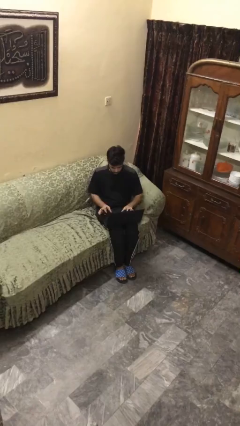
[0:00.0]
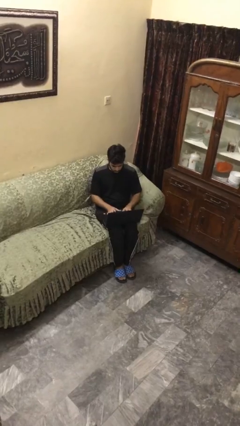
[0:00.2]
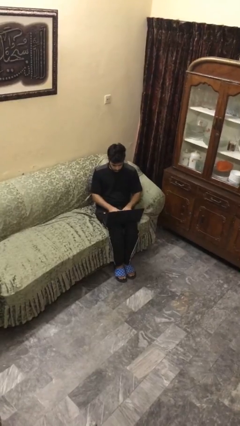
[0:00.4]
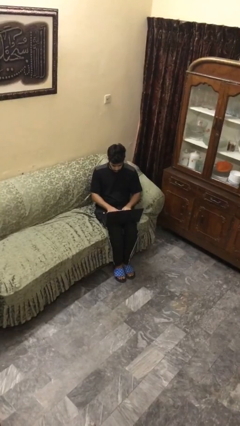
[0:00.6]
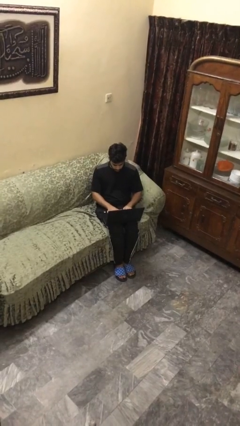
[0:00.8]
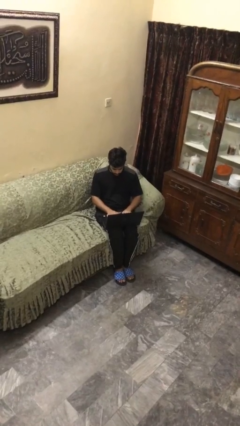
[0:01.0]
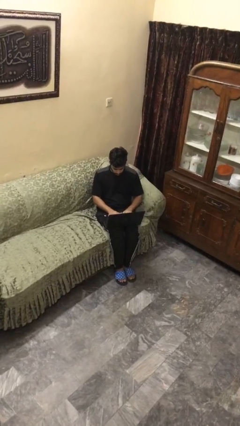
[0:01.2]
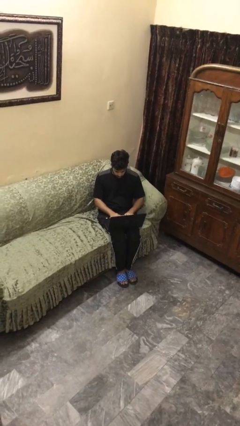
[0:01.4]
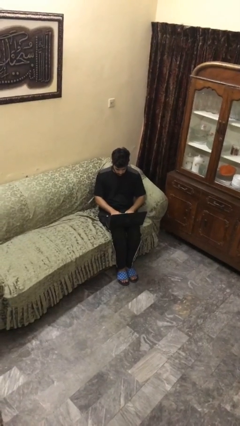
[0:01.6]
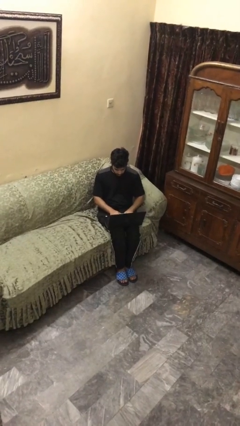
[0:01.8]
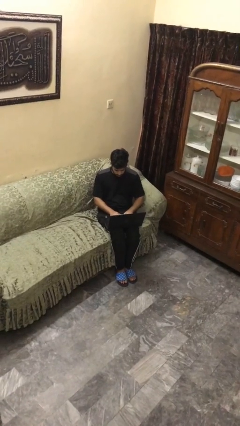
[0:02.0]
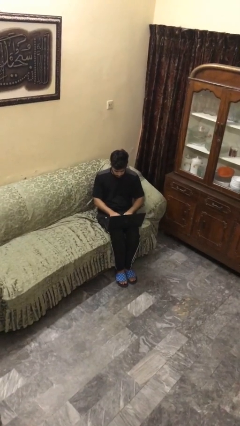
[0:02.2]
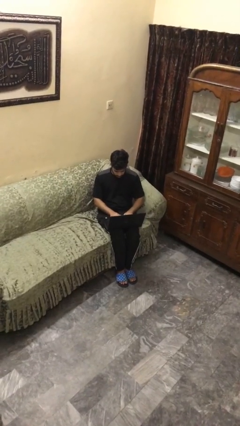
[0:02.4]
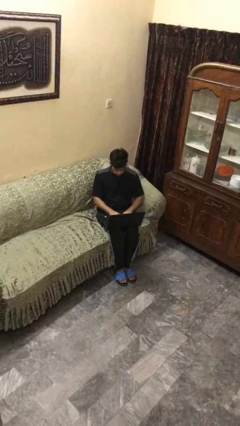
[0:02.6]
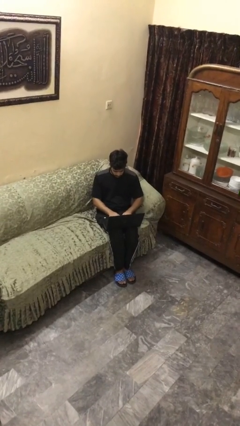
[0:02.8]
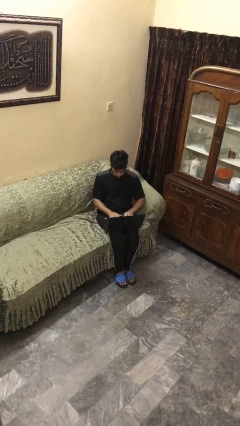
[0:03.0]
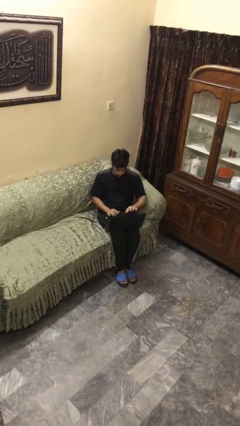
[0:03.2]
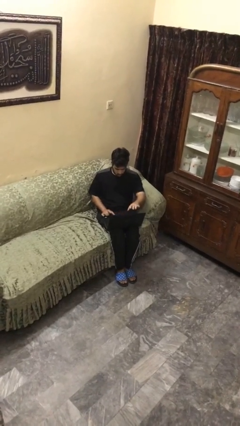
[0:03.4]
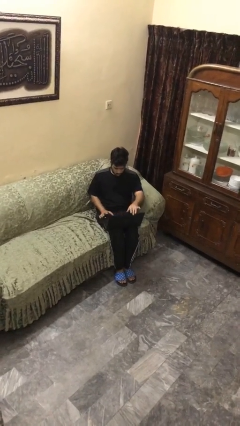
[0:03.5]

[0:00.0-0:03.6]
person interacts with laptop

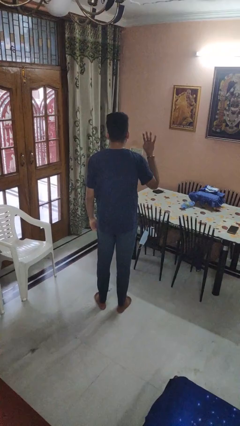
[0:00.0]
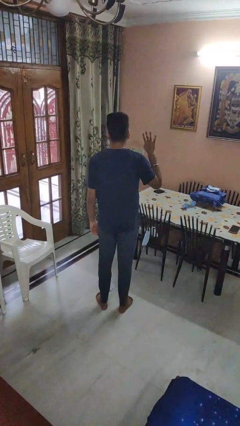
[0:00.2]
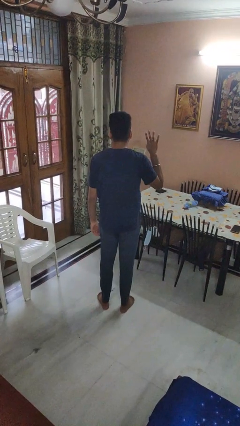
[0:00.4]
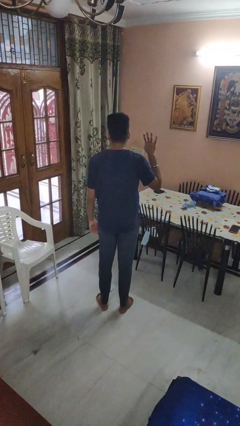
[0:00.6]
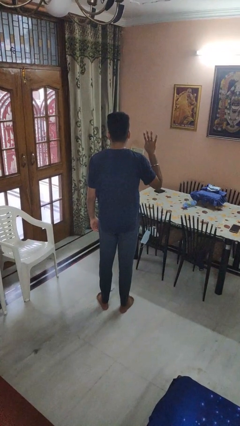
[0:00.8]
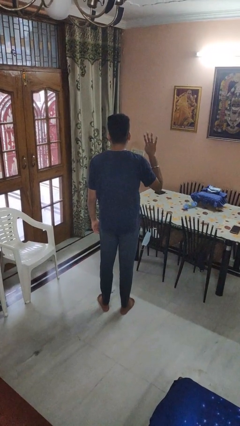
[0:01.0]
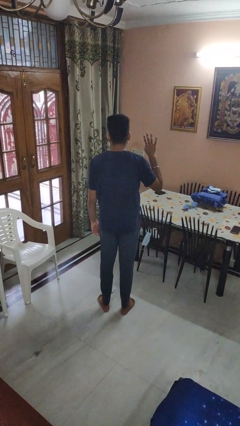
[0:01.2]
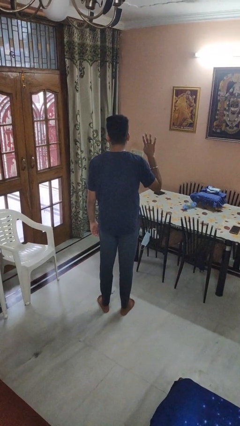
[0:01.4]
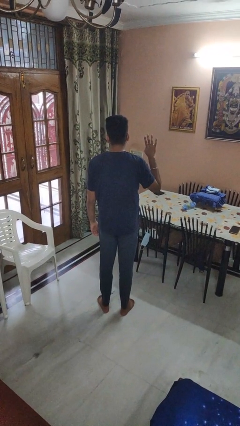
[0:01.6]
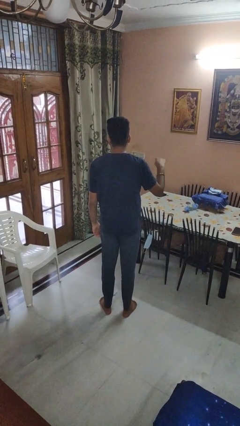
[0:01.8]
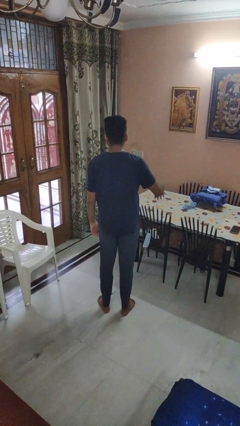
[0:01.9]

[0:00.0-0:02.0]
person gestures number four

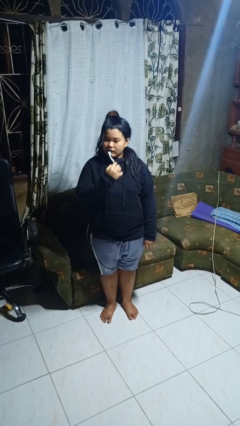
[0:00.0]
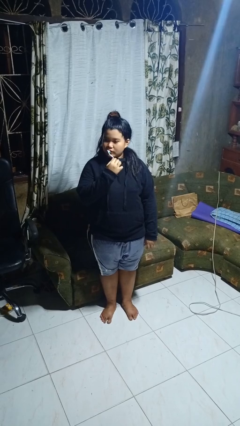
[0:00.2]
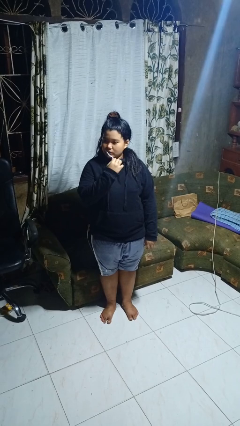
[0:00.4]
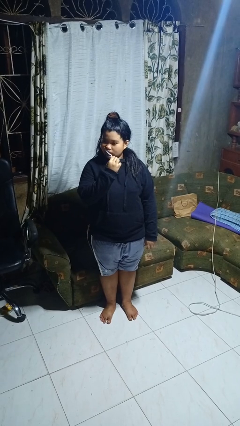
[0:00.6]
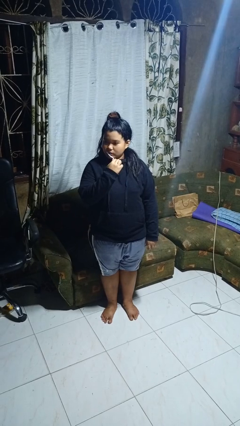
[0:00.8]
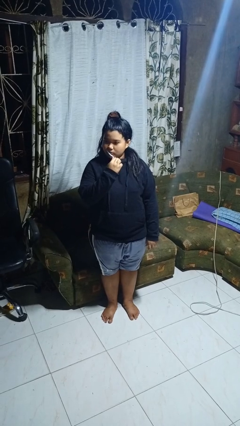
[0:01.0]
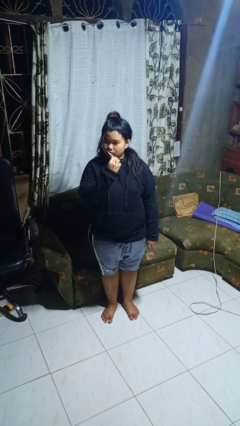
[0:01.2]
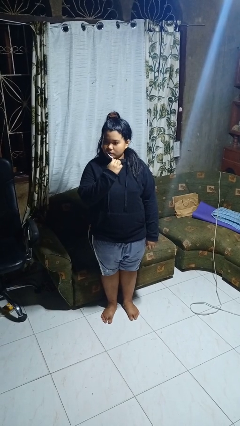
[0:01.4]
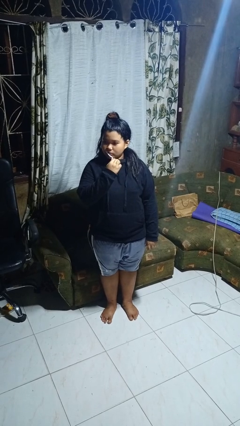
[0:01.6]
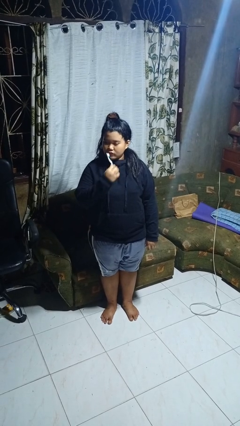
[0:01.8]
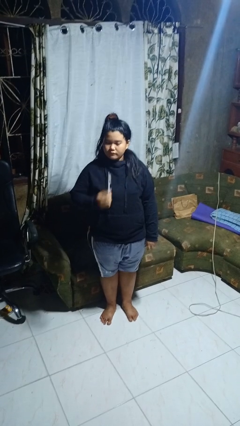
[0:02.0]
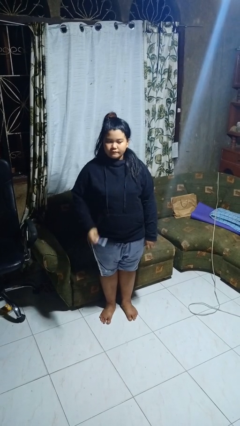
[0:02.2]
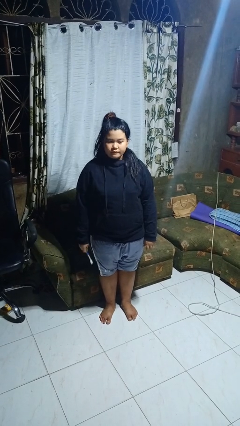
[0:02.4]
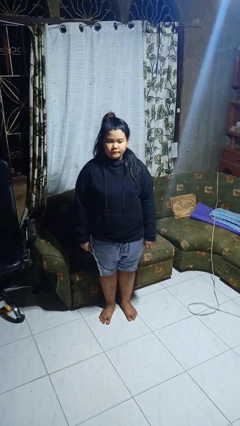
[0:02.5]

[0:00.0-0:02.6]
person brushes teeth

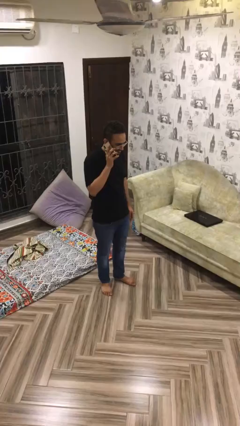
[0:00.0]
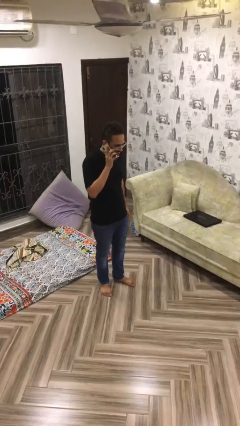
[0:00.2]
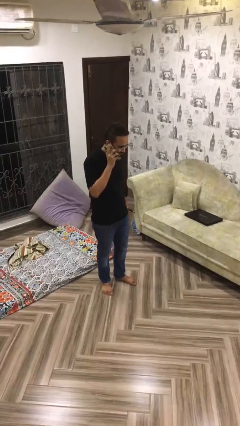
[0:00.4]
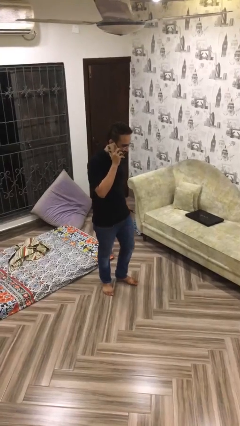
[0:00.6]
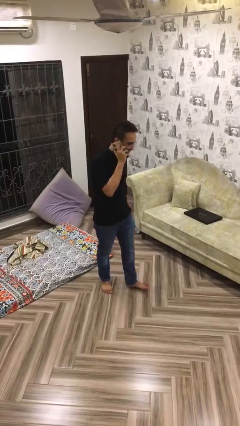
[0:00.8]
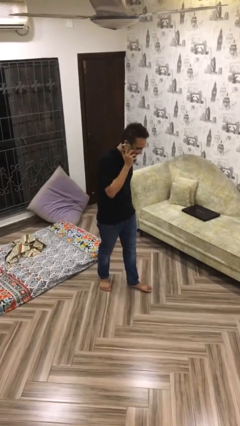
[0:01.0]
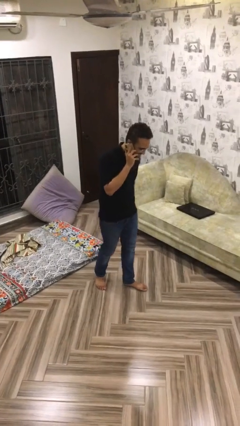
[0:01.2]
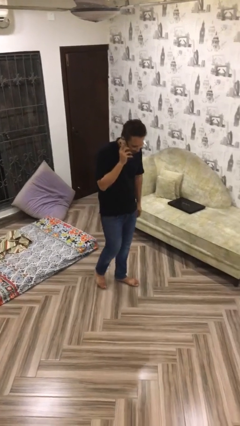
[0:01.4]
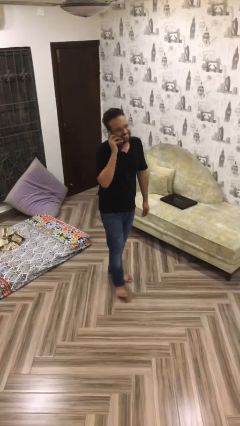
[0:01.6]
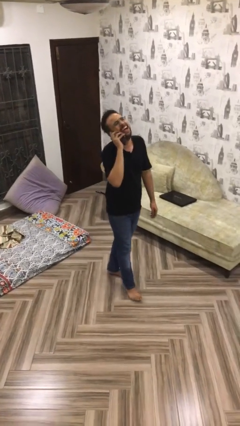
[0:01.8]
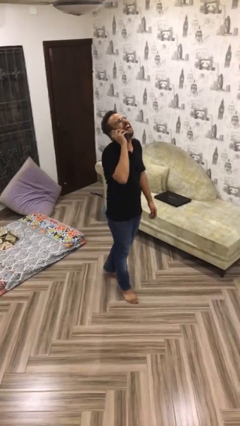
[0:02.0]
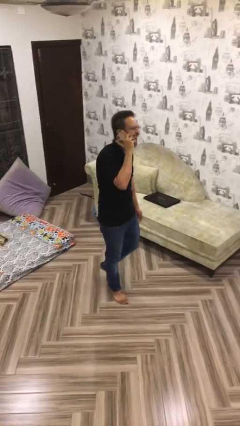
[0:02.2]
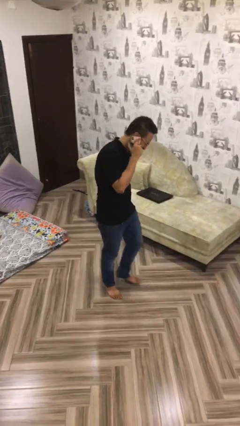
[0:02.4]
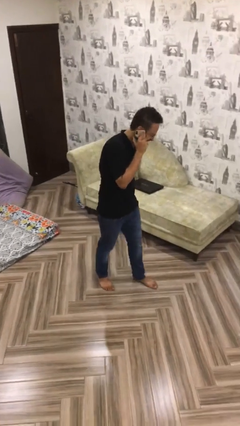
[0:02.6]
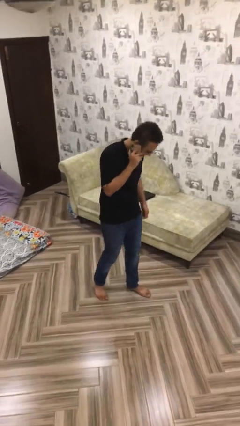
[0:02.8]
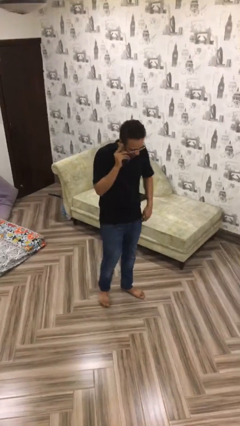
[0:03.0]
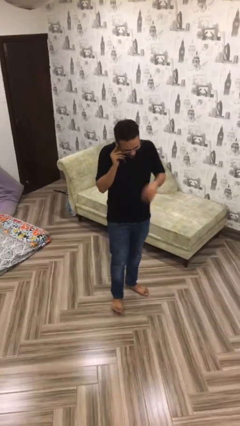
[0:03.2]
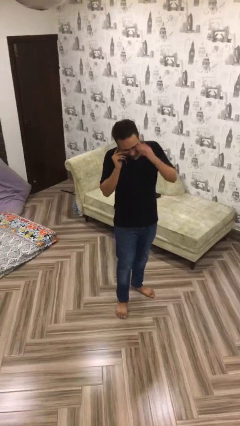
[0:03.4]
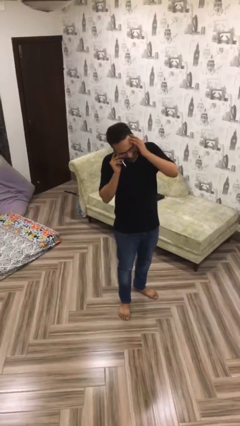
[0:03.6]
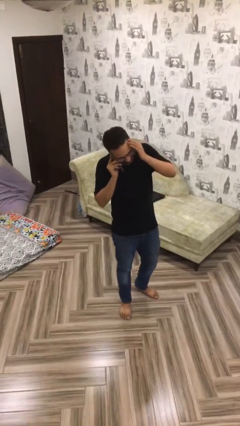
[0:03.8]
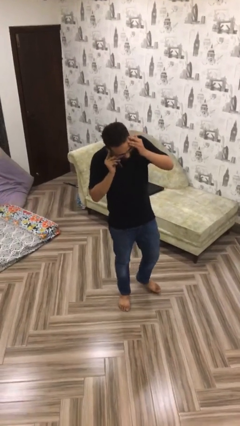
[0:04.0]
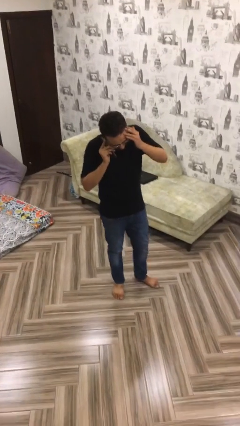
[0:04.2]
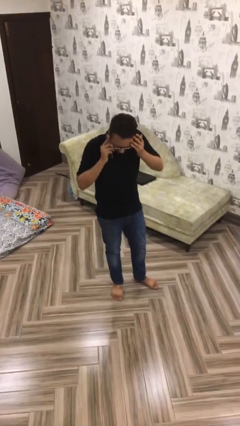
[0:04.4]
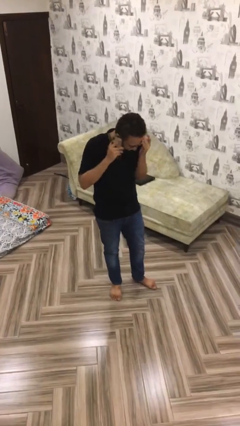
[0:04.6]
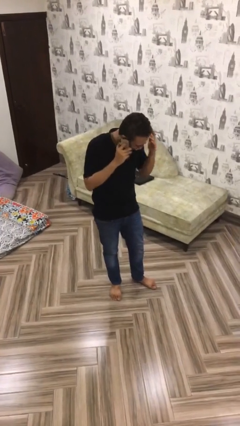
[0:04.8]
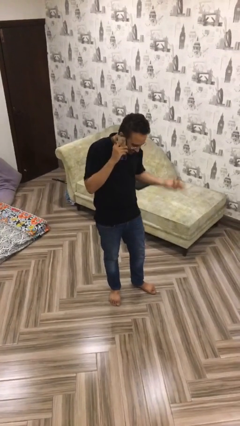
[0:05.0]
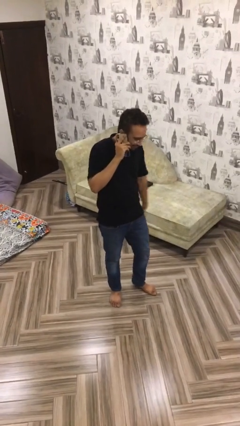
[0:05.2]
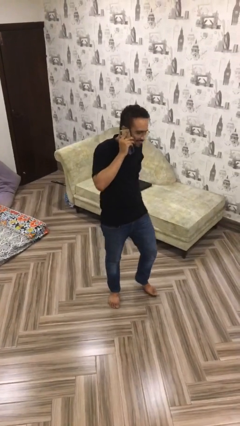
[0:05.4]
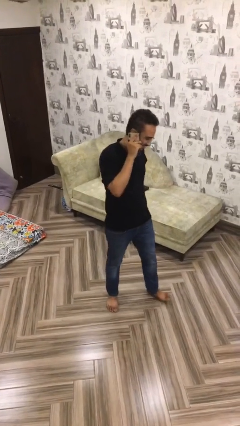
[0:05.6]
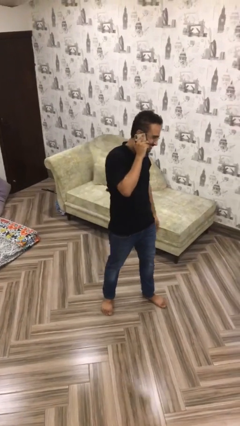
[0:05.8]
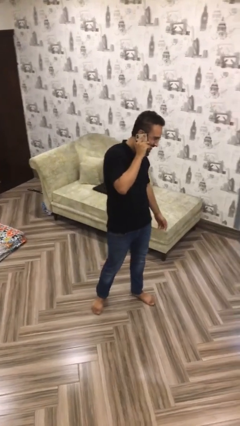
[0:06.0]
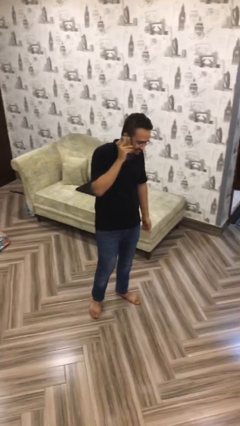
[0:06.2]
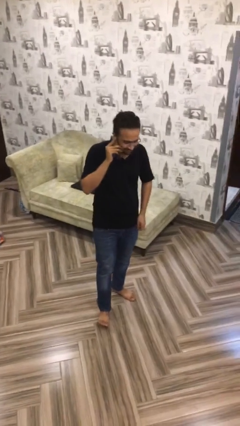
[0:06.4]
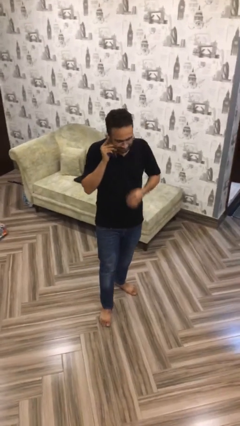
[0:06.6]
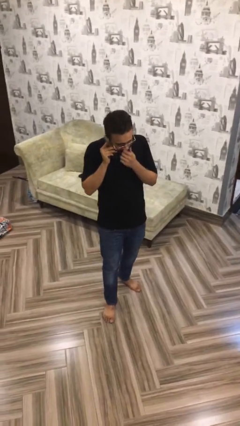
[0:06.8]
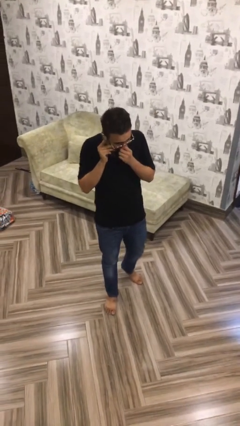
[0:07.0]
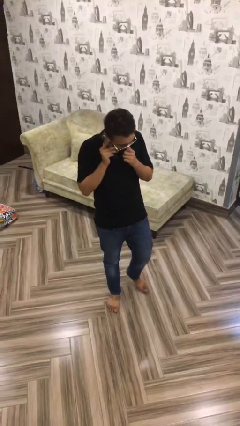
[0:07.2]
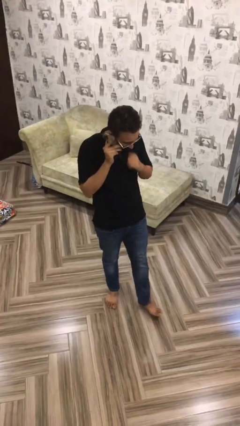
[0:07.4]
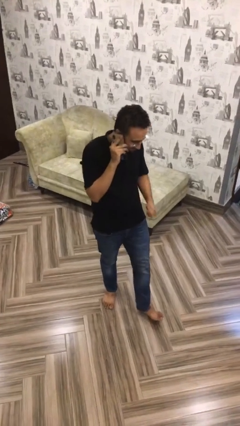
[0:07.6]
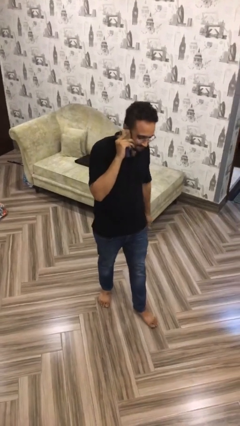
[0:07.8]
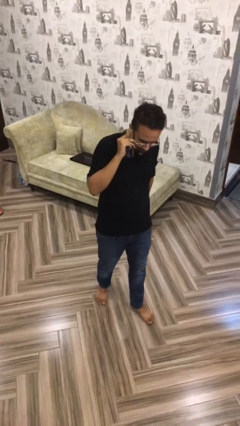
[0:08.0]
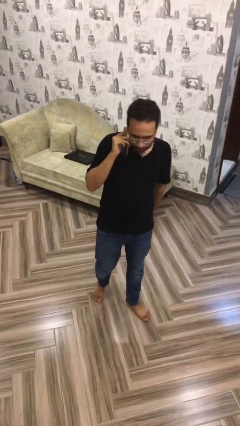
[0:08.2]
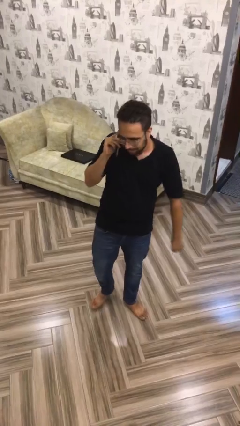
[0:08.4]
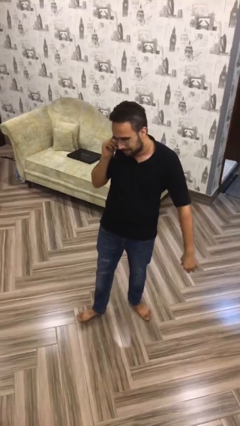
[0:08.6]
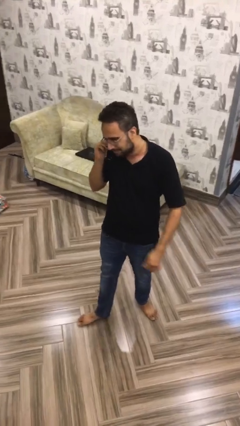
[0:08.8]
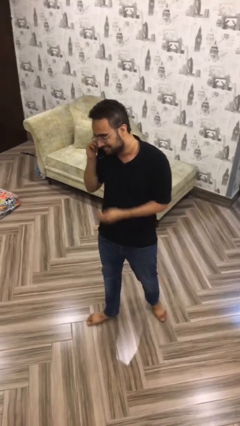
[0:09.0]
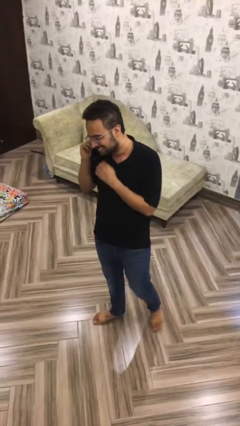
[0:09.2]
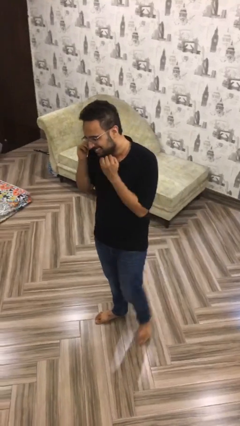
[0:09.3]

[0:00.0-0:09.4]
person talks on phone

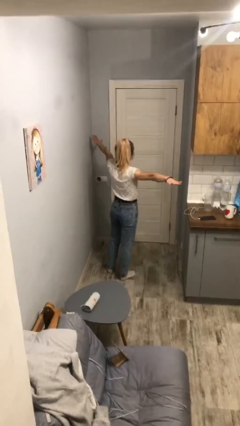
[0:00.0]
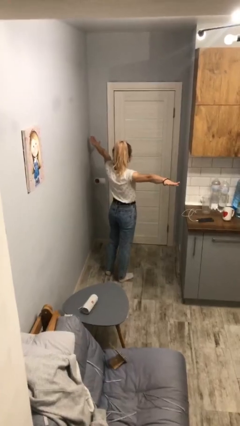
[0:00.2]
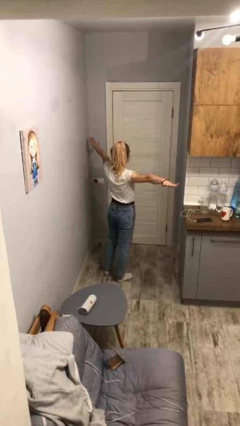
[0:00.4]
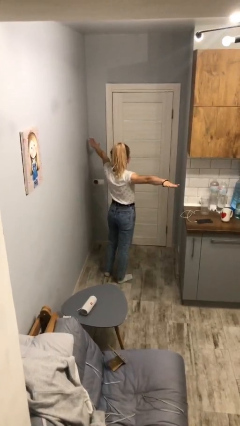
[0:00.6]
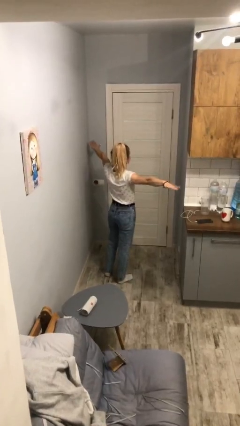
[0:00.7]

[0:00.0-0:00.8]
person stretches arms to side
